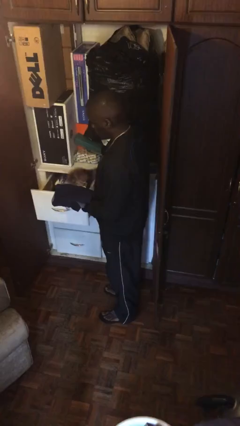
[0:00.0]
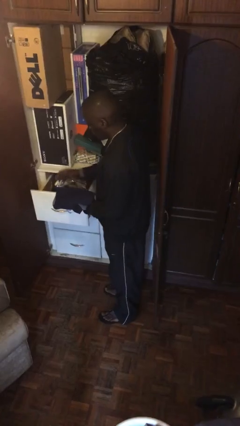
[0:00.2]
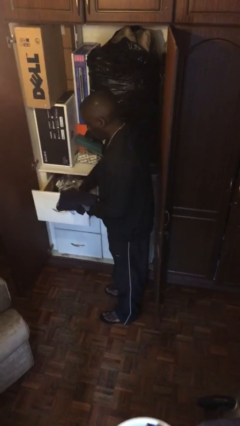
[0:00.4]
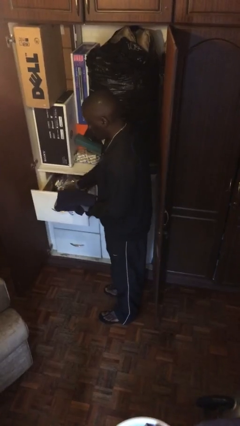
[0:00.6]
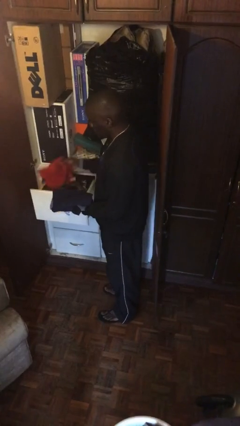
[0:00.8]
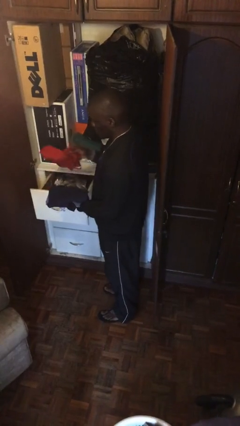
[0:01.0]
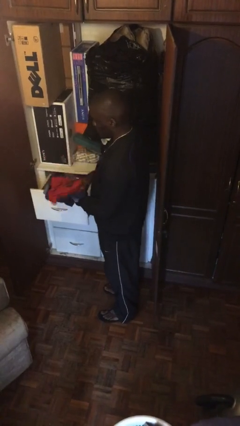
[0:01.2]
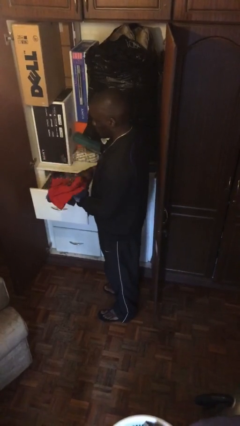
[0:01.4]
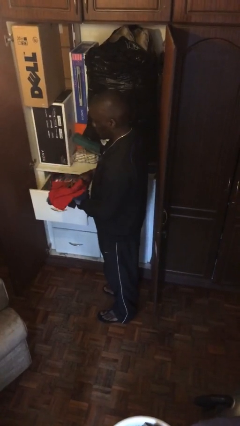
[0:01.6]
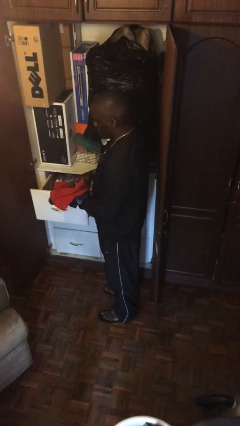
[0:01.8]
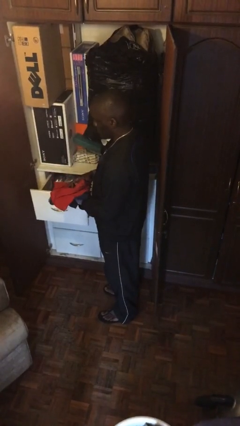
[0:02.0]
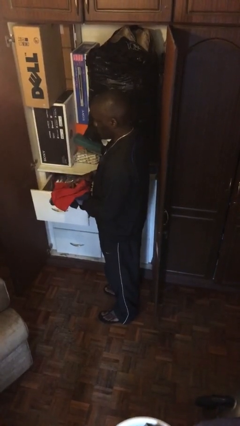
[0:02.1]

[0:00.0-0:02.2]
person takes clothes from dresser

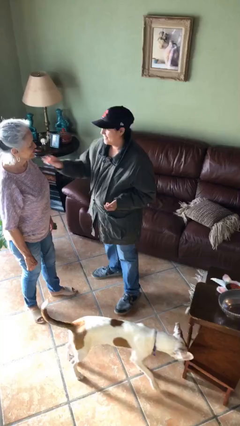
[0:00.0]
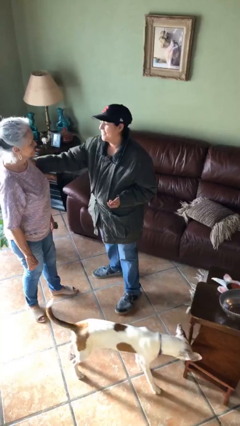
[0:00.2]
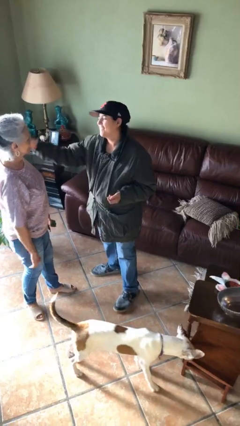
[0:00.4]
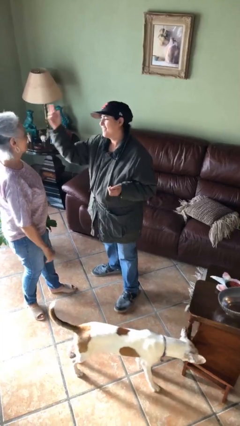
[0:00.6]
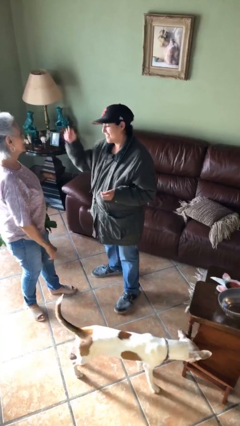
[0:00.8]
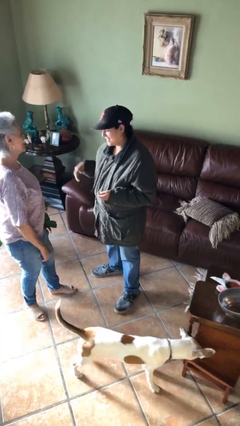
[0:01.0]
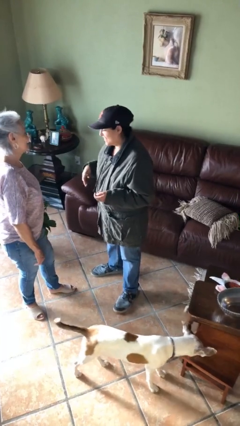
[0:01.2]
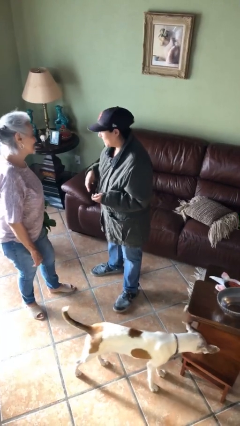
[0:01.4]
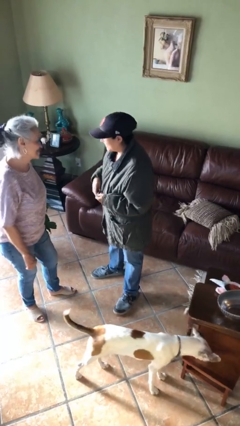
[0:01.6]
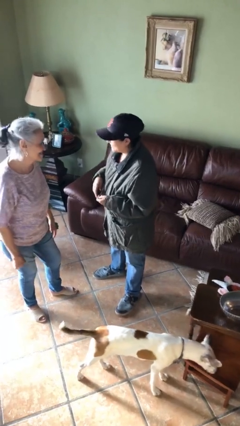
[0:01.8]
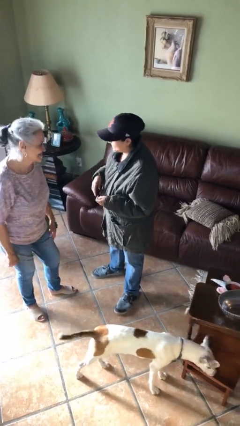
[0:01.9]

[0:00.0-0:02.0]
person shoves person

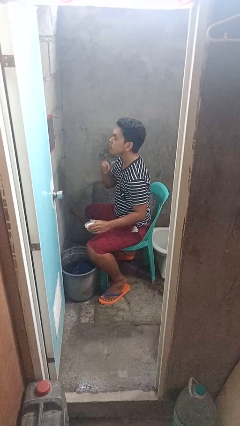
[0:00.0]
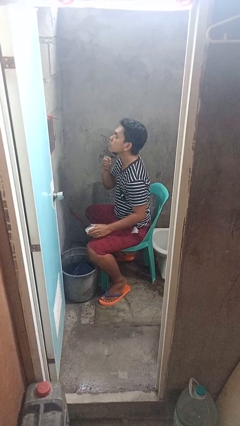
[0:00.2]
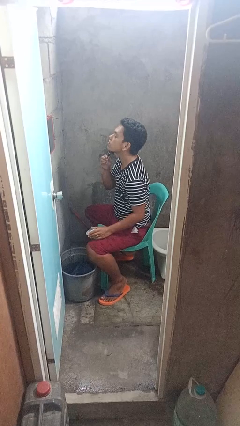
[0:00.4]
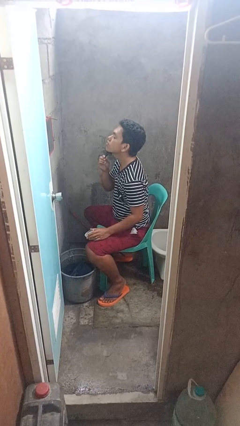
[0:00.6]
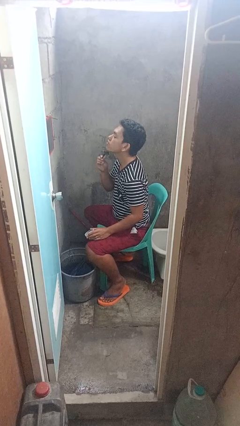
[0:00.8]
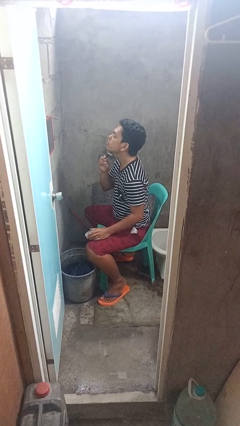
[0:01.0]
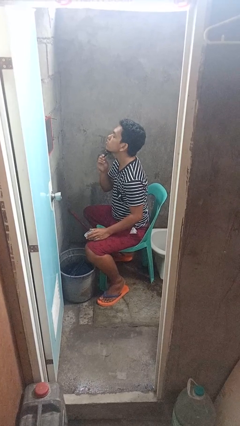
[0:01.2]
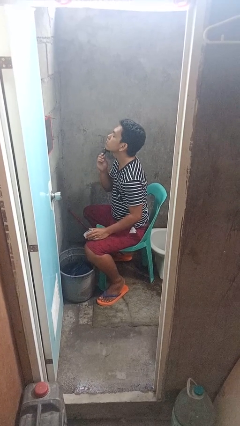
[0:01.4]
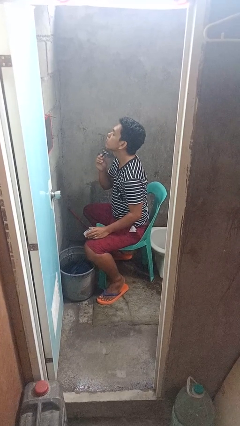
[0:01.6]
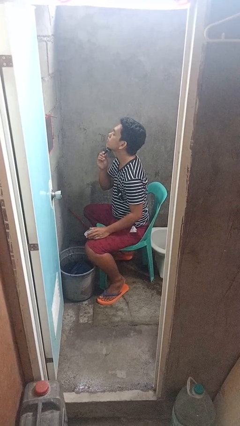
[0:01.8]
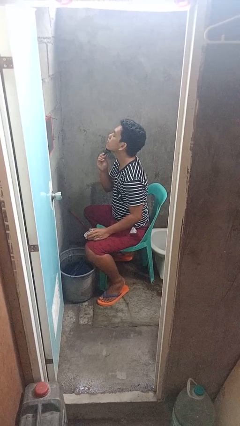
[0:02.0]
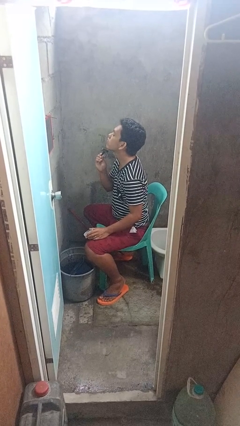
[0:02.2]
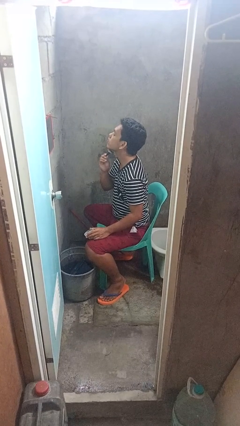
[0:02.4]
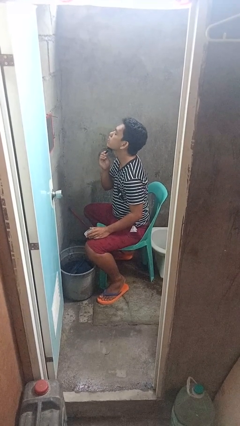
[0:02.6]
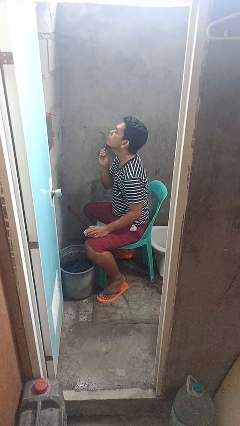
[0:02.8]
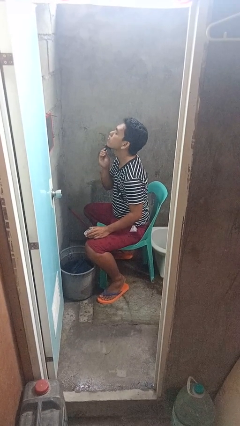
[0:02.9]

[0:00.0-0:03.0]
person shaves face

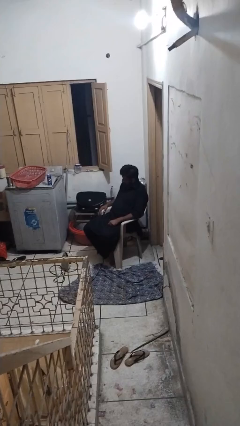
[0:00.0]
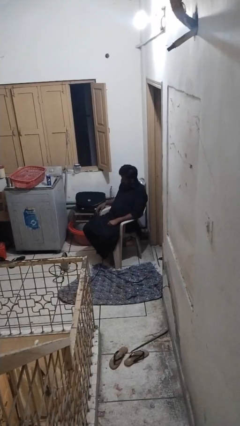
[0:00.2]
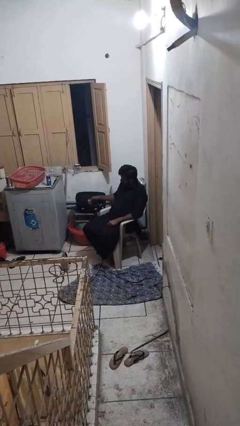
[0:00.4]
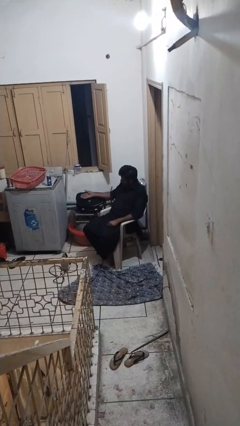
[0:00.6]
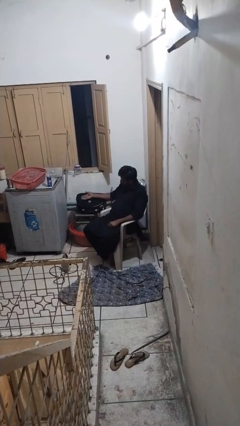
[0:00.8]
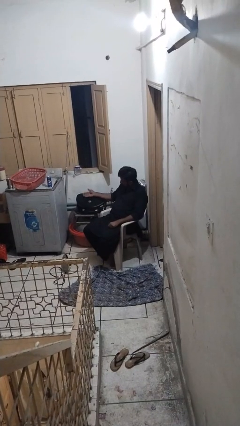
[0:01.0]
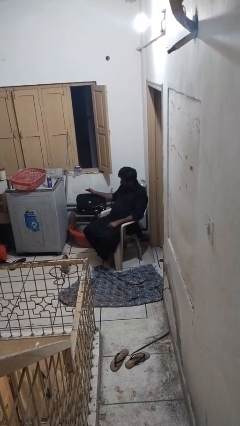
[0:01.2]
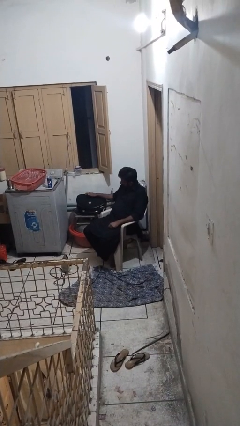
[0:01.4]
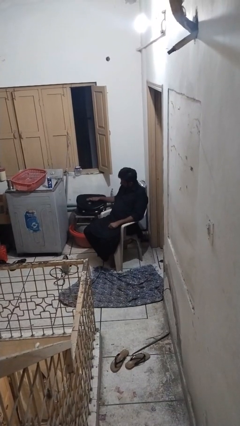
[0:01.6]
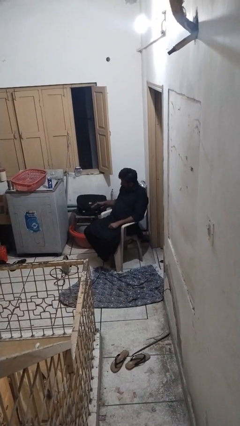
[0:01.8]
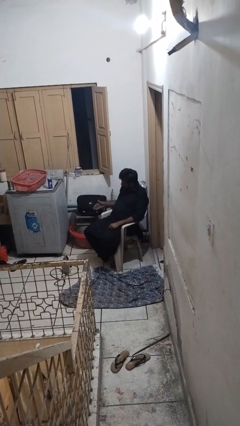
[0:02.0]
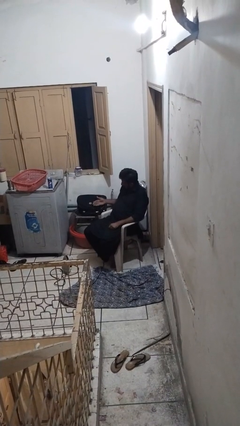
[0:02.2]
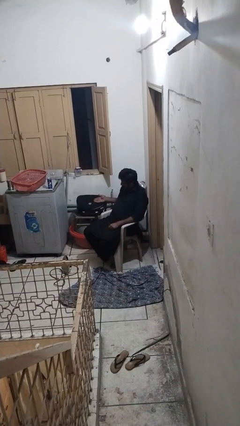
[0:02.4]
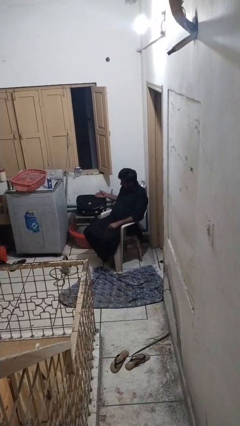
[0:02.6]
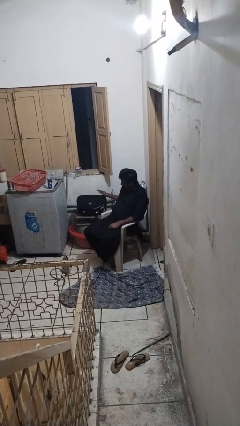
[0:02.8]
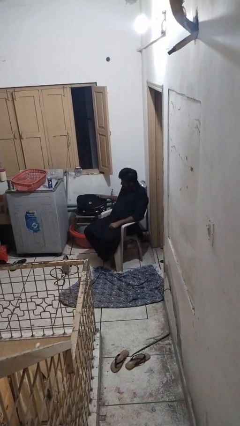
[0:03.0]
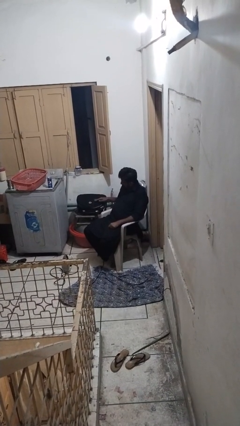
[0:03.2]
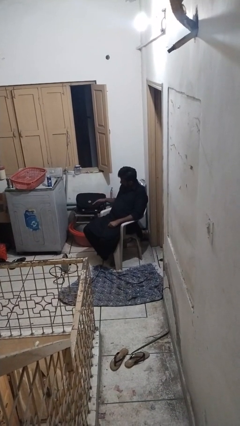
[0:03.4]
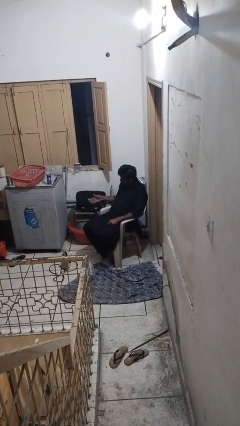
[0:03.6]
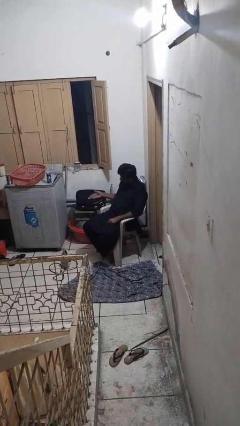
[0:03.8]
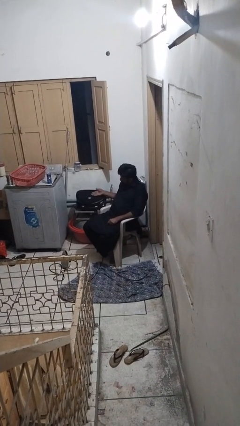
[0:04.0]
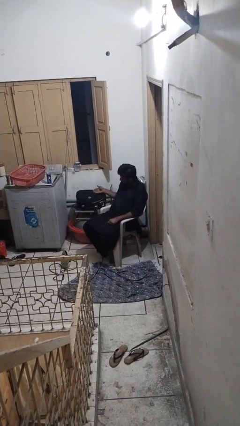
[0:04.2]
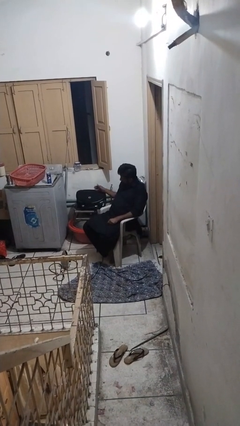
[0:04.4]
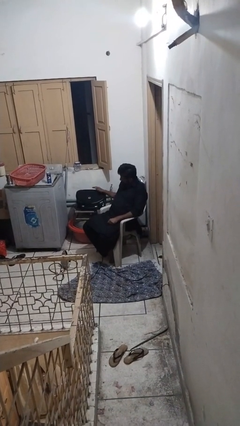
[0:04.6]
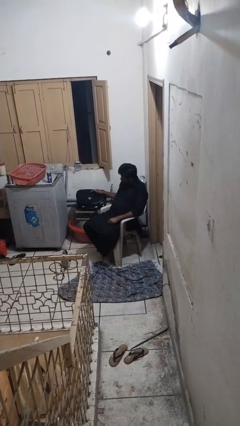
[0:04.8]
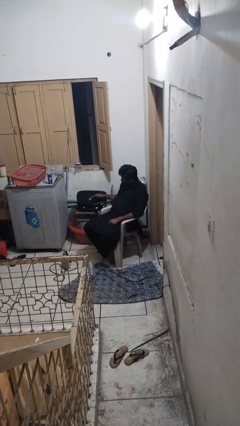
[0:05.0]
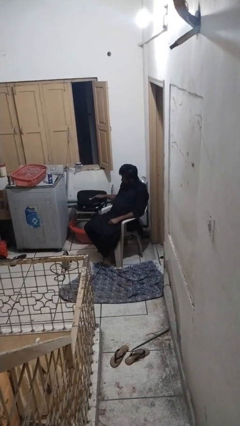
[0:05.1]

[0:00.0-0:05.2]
person waves hand over object

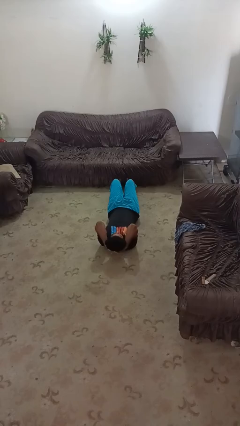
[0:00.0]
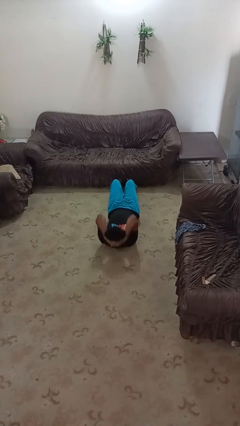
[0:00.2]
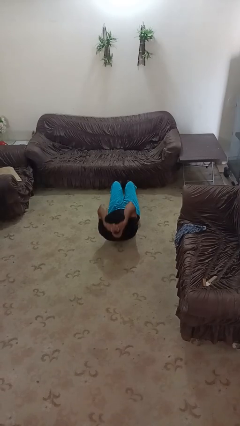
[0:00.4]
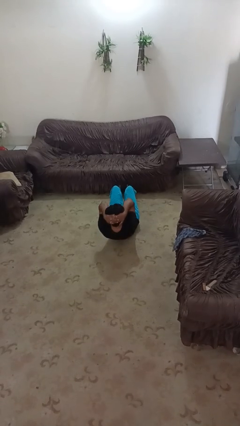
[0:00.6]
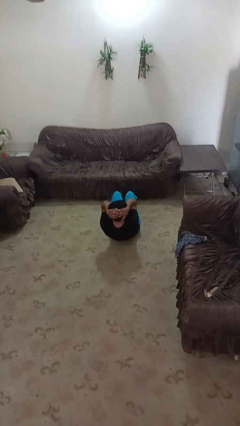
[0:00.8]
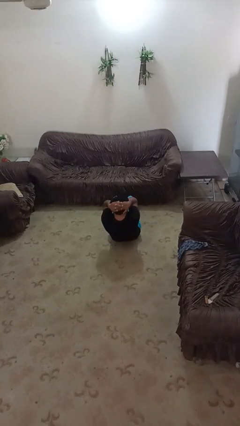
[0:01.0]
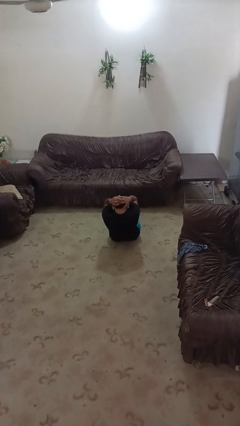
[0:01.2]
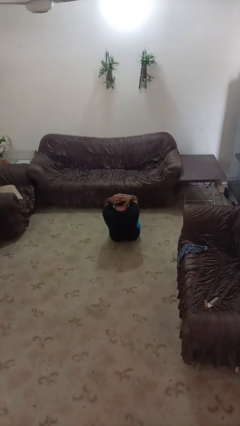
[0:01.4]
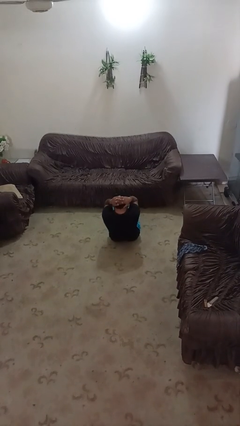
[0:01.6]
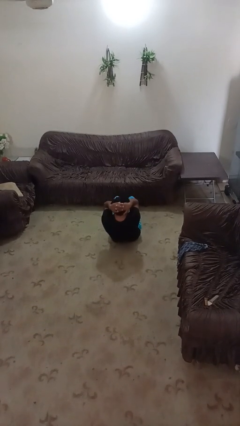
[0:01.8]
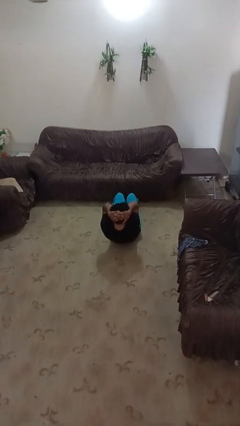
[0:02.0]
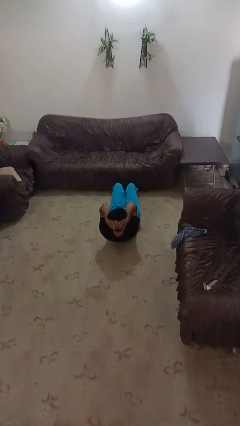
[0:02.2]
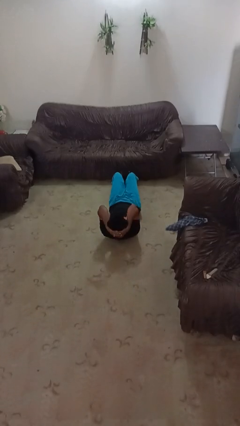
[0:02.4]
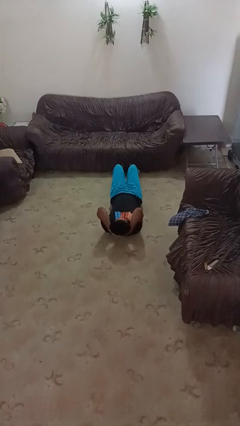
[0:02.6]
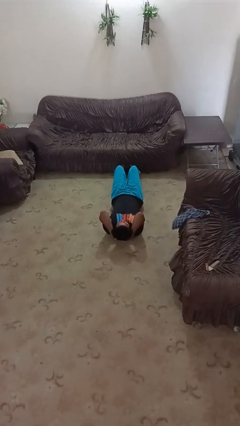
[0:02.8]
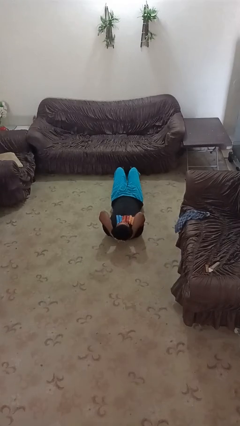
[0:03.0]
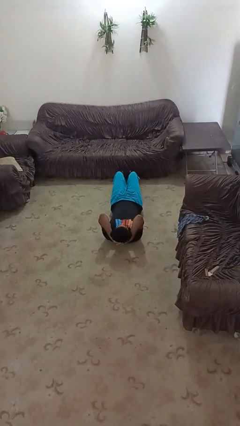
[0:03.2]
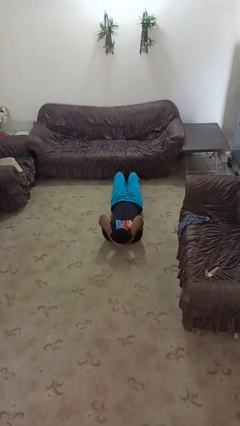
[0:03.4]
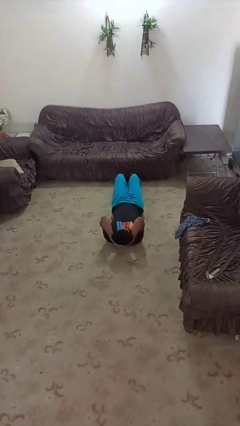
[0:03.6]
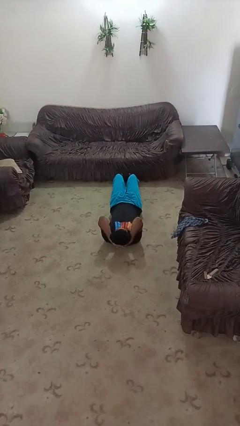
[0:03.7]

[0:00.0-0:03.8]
person exercises with situp

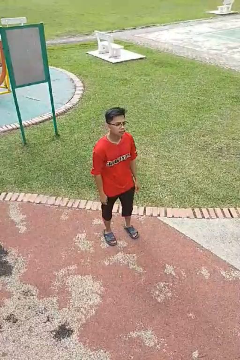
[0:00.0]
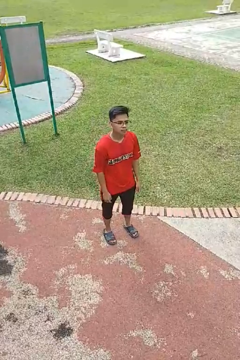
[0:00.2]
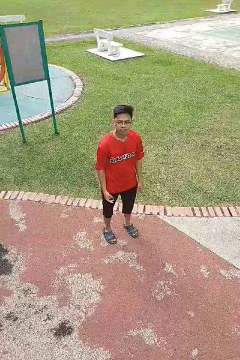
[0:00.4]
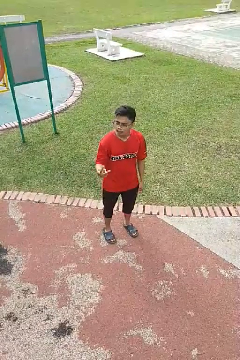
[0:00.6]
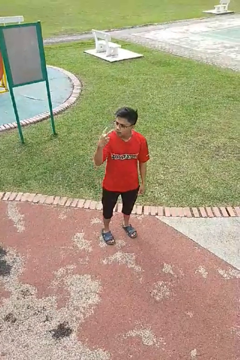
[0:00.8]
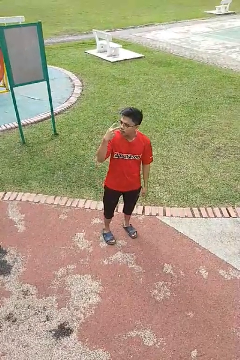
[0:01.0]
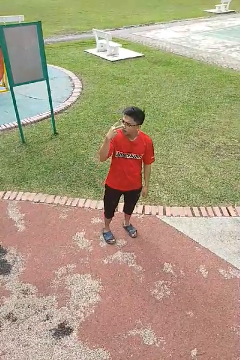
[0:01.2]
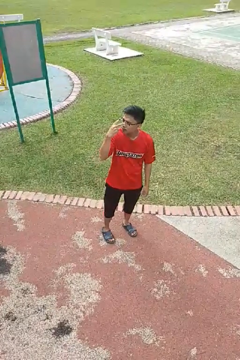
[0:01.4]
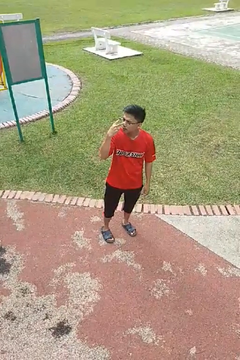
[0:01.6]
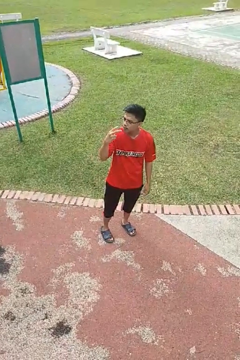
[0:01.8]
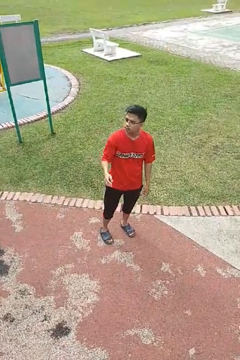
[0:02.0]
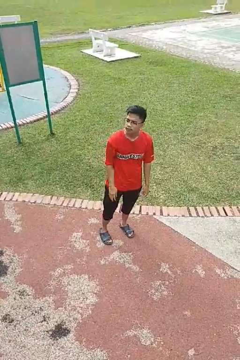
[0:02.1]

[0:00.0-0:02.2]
person gestures watch closely
